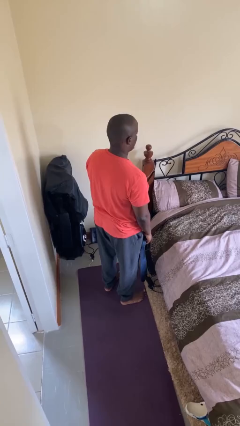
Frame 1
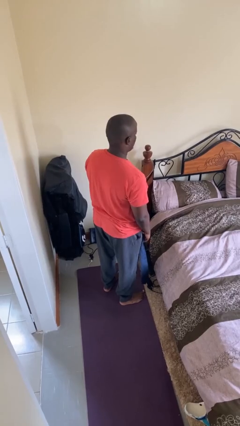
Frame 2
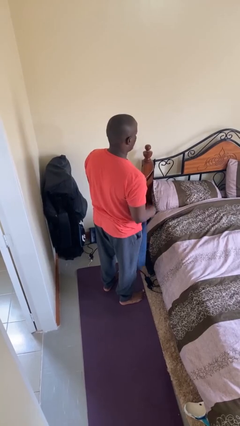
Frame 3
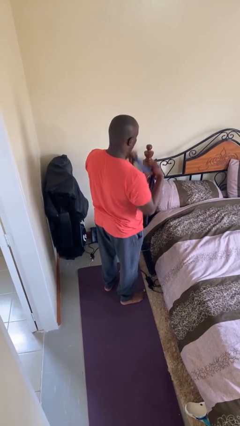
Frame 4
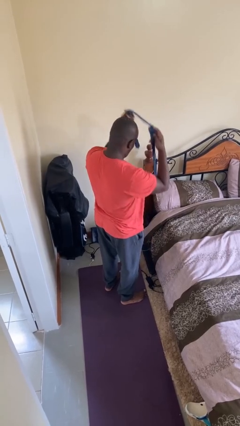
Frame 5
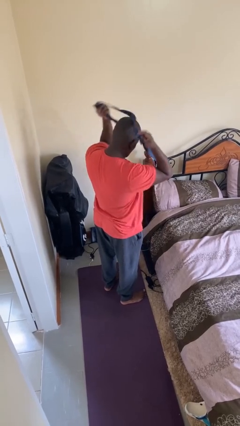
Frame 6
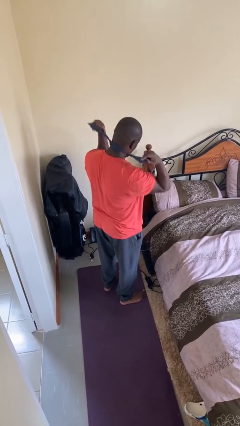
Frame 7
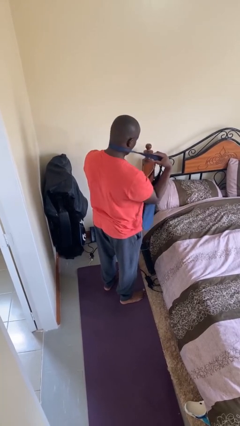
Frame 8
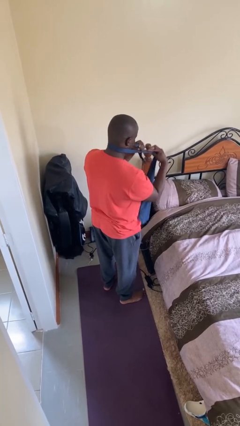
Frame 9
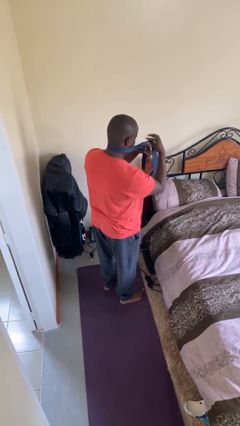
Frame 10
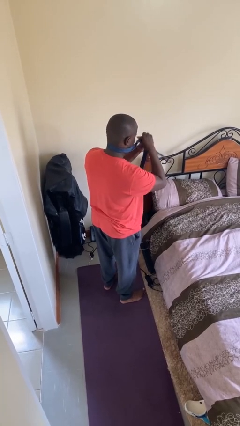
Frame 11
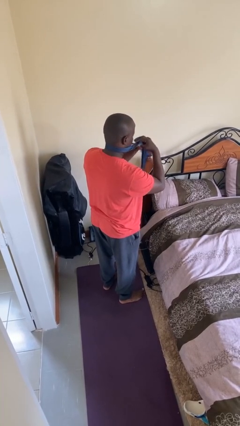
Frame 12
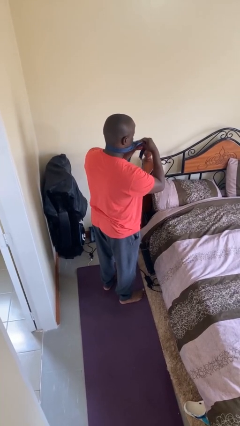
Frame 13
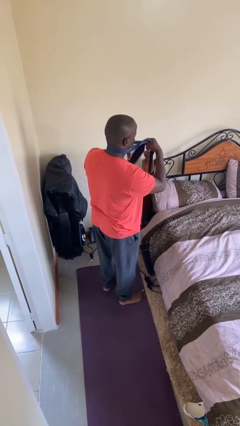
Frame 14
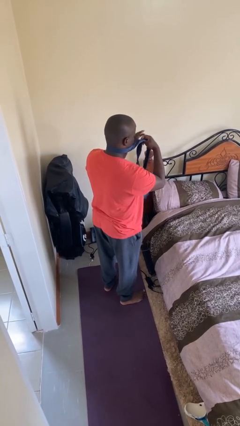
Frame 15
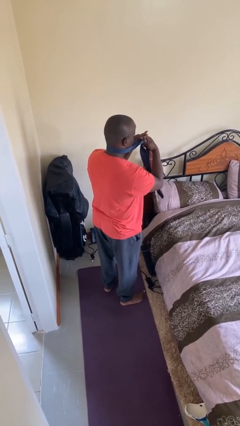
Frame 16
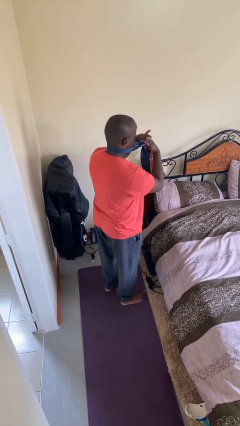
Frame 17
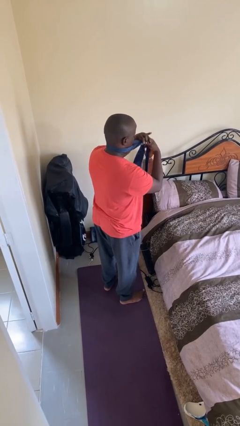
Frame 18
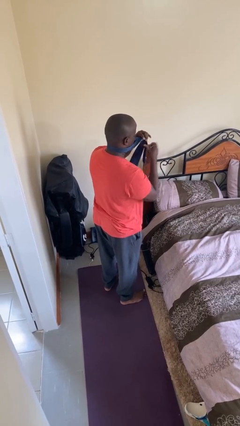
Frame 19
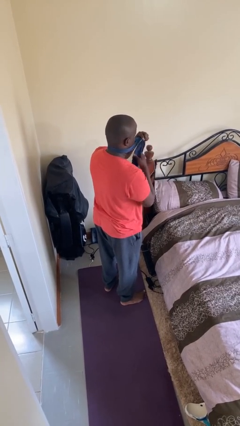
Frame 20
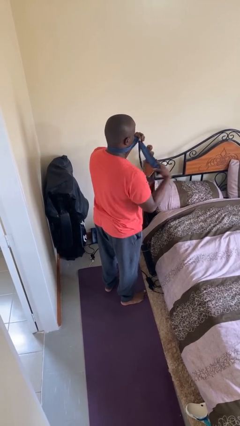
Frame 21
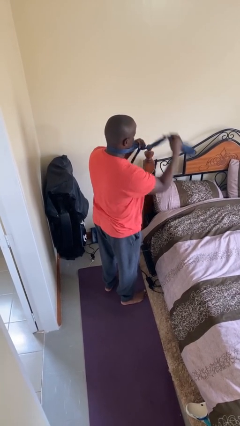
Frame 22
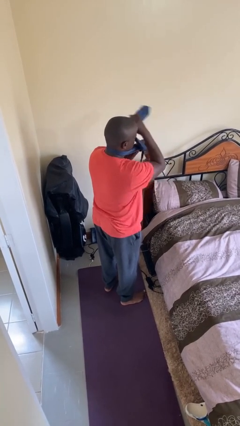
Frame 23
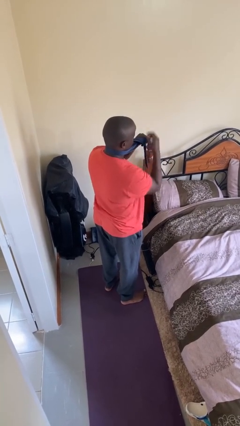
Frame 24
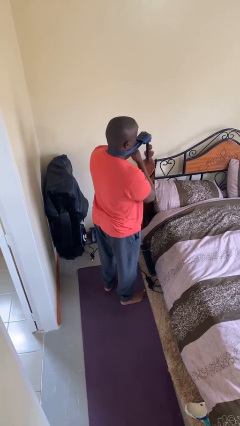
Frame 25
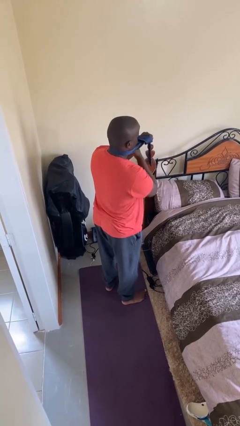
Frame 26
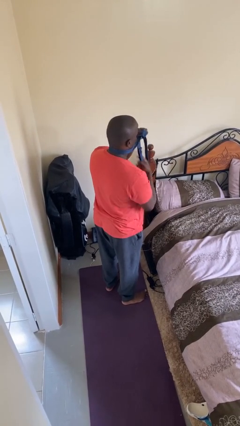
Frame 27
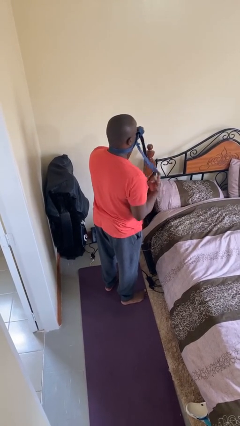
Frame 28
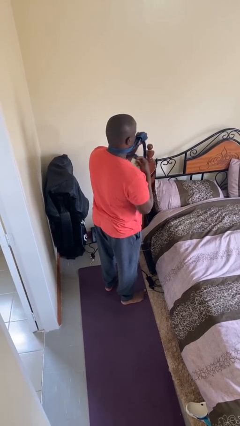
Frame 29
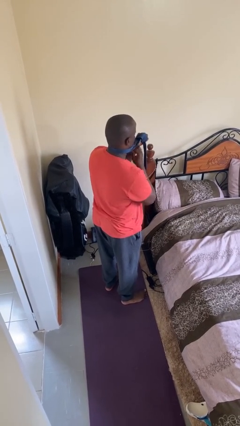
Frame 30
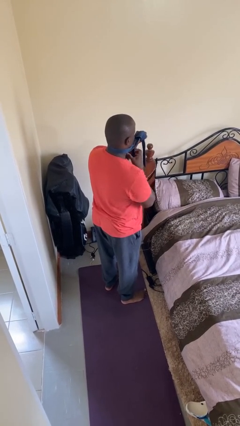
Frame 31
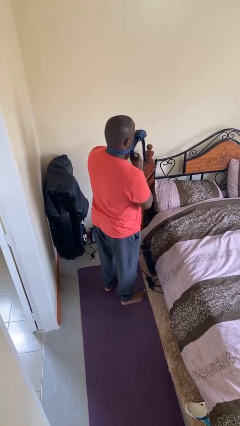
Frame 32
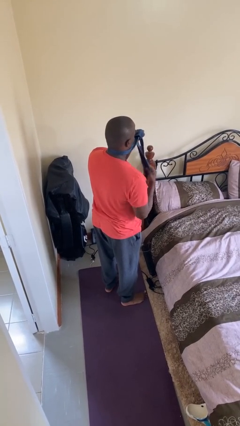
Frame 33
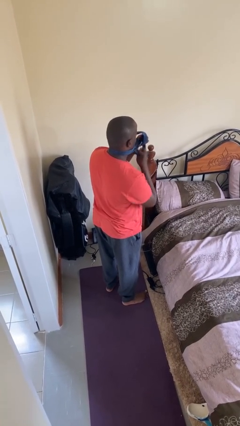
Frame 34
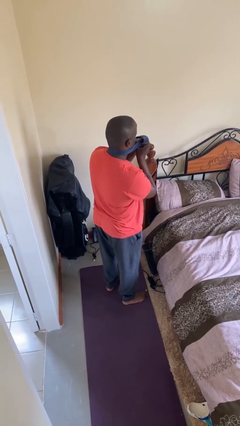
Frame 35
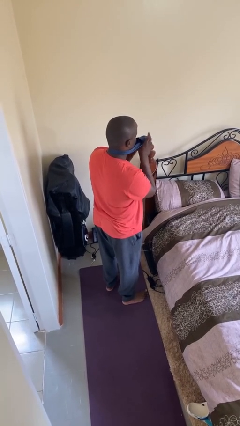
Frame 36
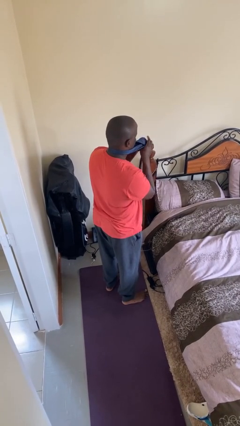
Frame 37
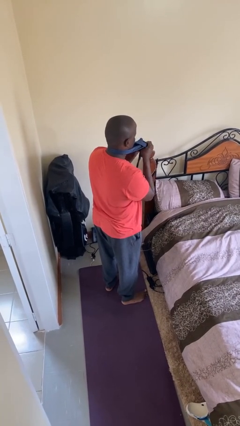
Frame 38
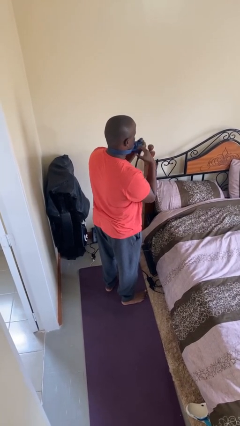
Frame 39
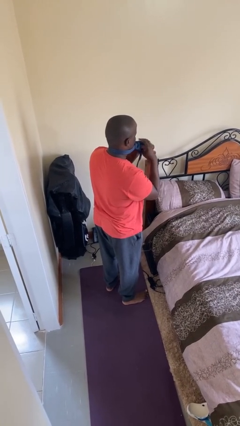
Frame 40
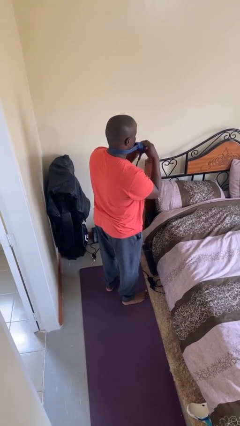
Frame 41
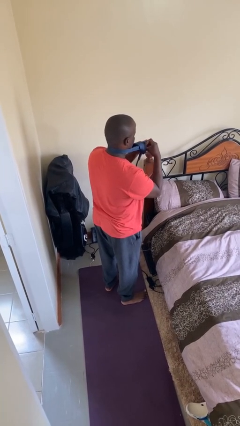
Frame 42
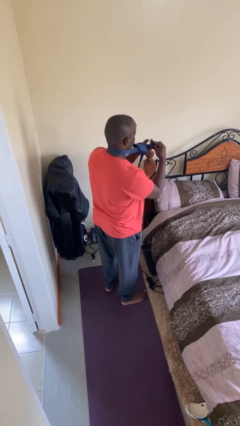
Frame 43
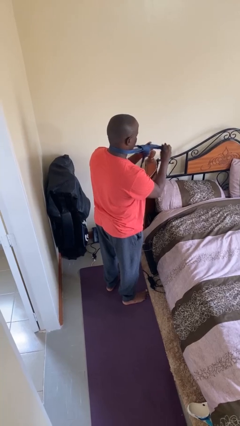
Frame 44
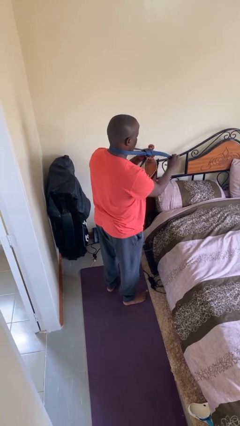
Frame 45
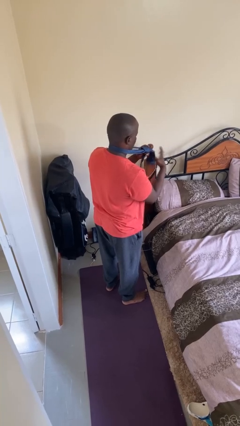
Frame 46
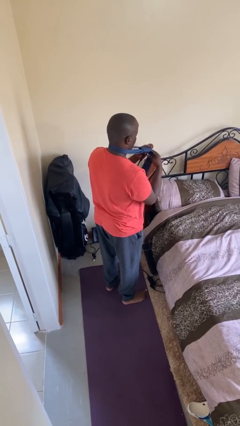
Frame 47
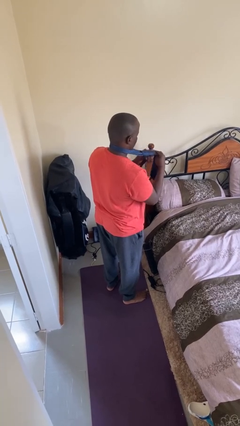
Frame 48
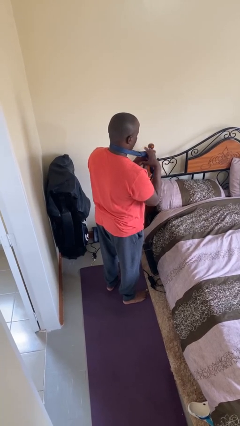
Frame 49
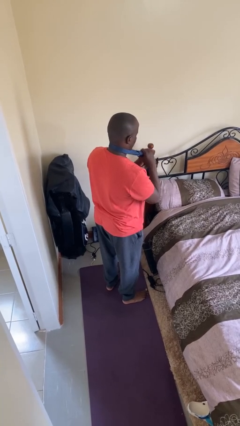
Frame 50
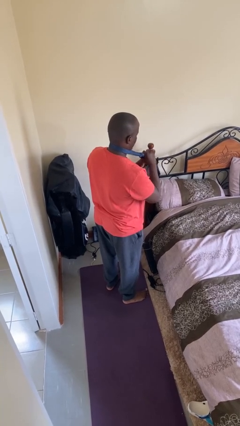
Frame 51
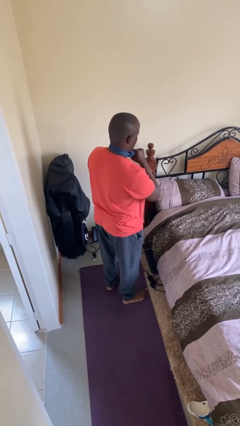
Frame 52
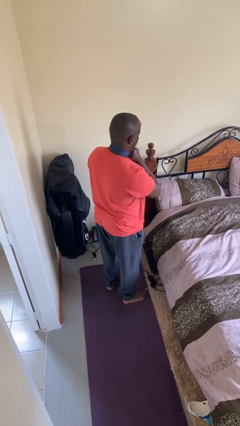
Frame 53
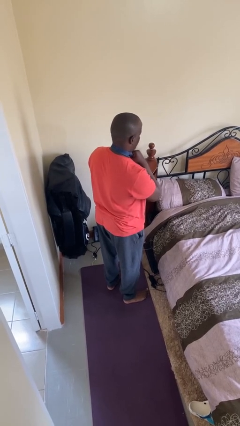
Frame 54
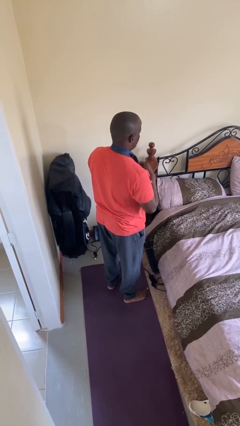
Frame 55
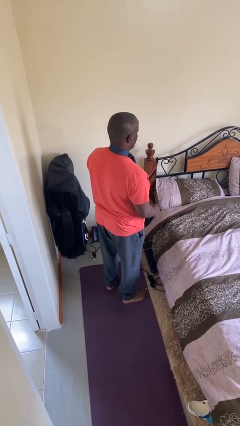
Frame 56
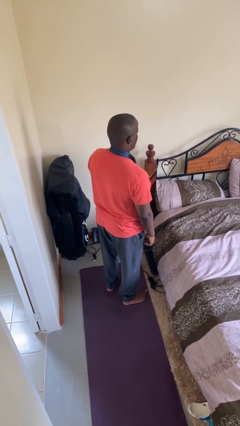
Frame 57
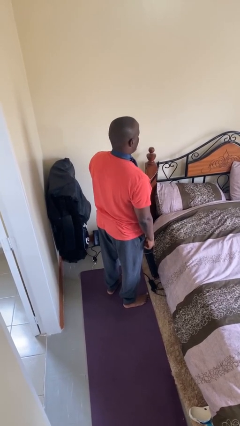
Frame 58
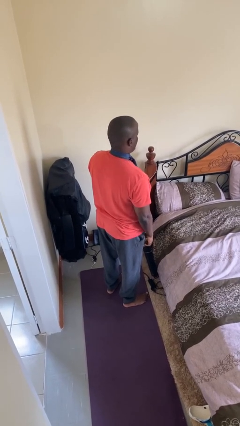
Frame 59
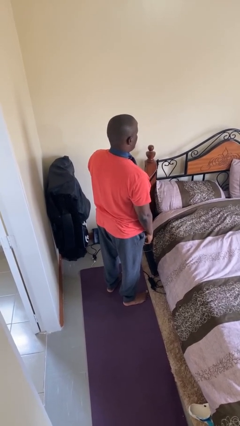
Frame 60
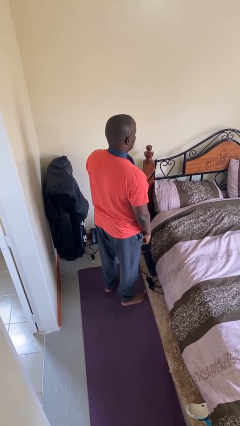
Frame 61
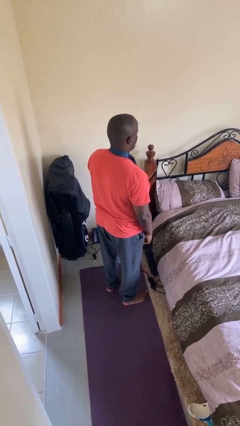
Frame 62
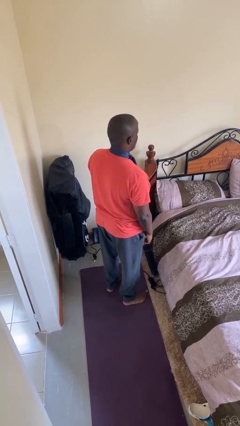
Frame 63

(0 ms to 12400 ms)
person puts on necktie

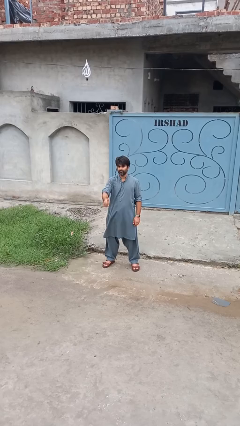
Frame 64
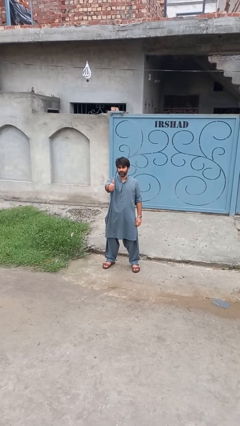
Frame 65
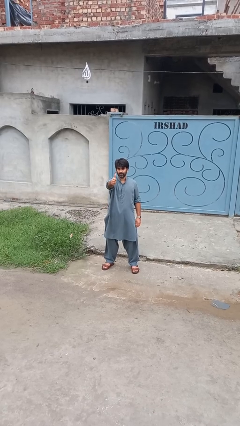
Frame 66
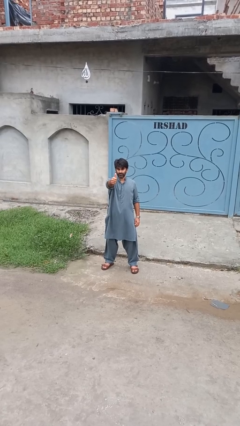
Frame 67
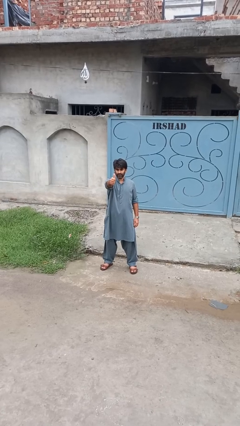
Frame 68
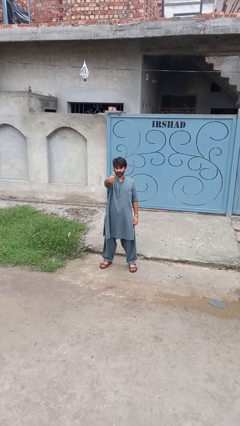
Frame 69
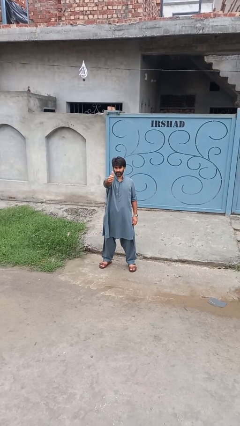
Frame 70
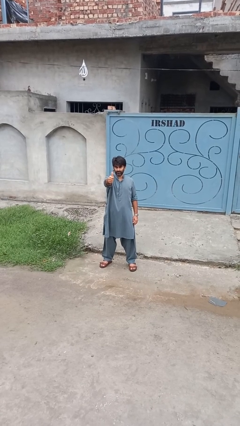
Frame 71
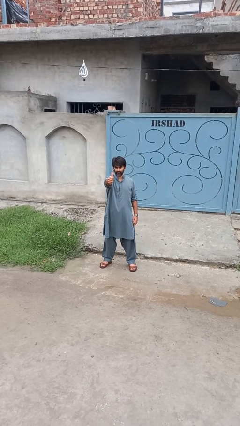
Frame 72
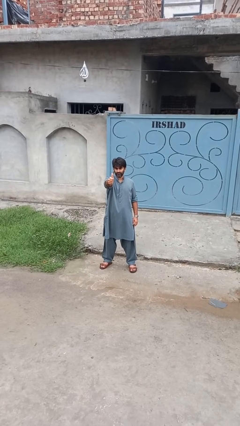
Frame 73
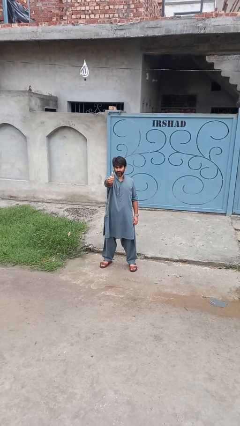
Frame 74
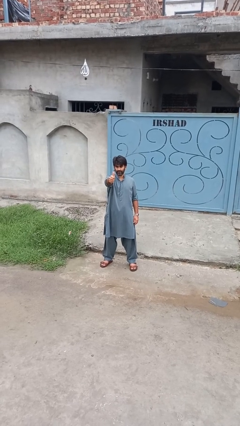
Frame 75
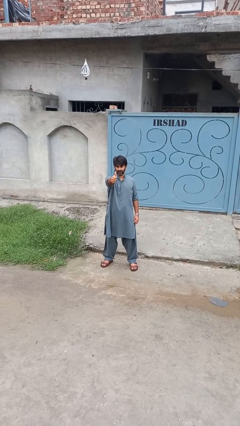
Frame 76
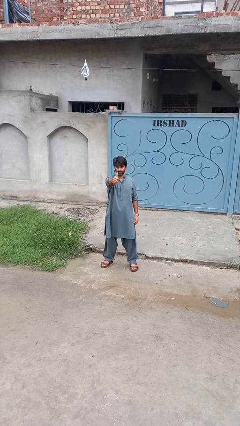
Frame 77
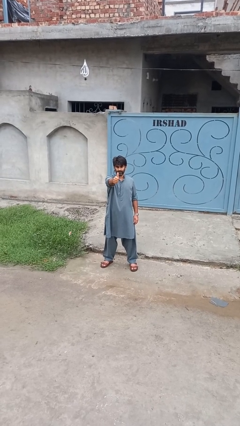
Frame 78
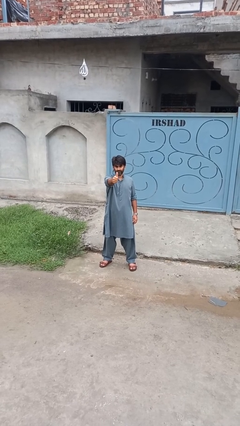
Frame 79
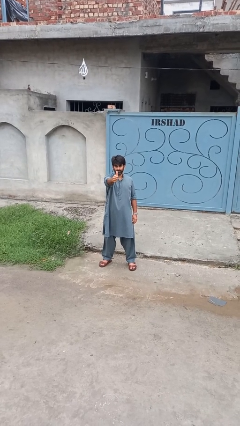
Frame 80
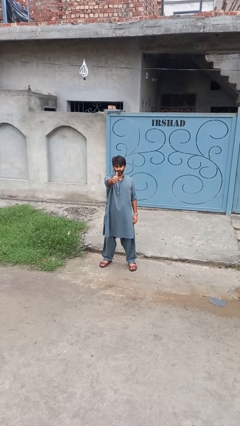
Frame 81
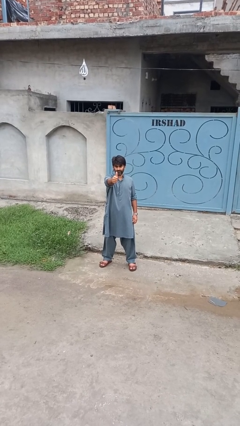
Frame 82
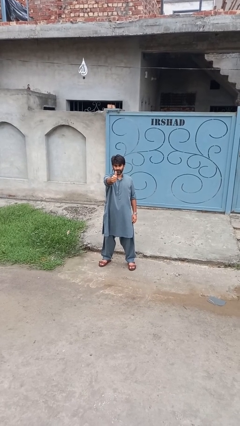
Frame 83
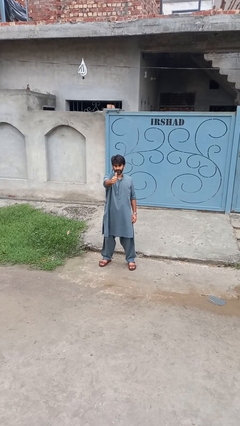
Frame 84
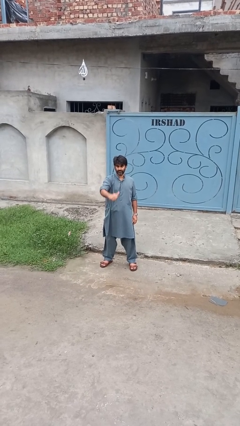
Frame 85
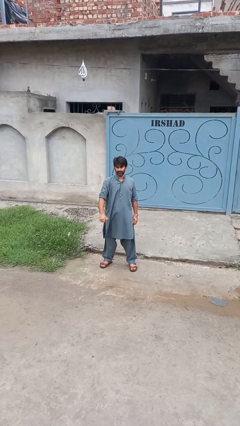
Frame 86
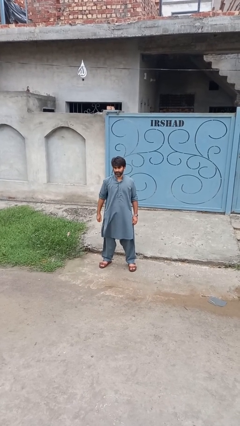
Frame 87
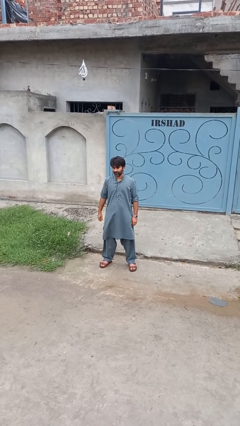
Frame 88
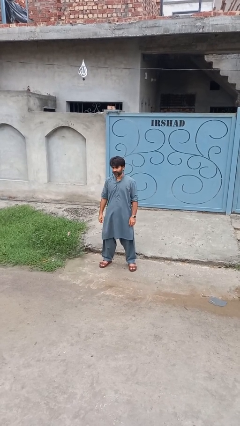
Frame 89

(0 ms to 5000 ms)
person gestures thumbs up

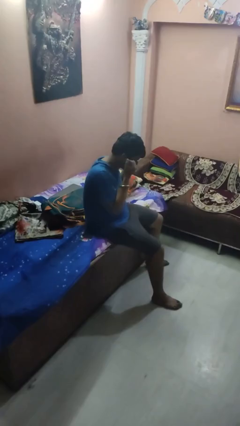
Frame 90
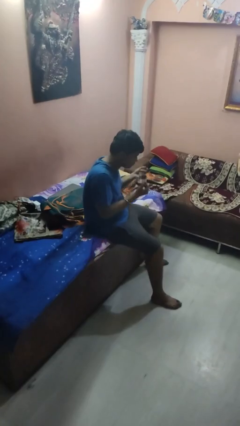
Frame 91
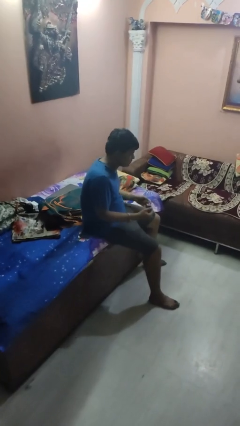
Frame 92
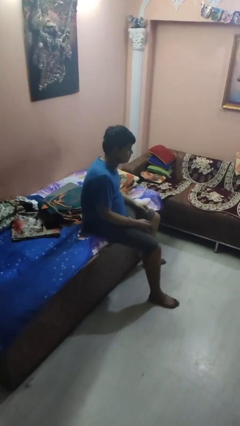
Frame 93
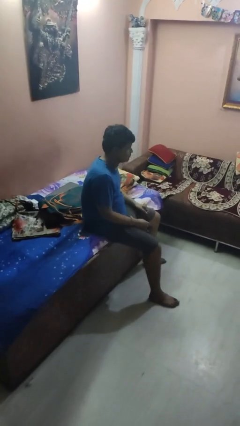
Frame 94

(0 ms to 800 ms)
person takes off facemask
